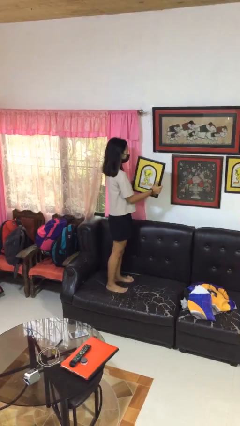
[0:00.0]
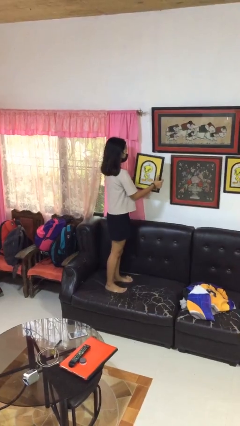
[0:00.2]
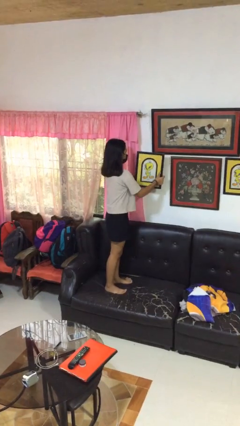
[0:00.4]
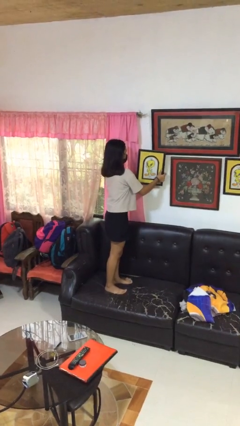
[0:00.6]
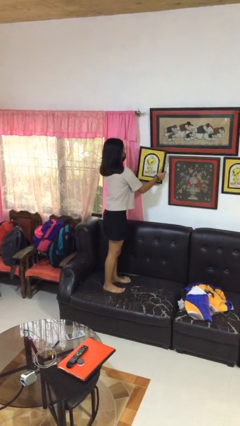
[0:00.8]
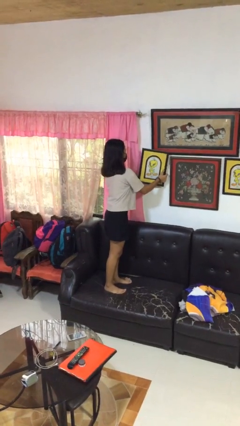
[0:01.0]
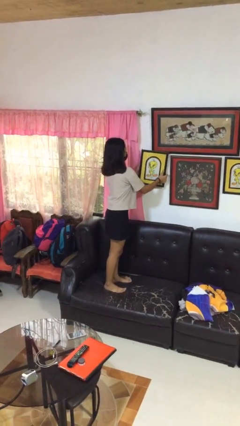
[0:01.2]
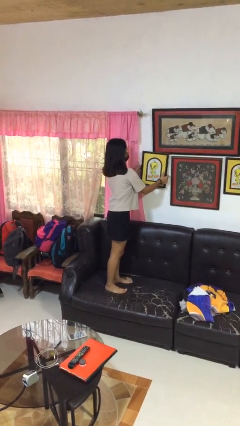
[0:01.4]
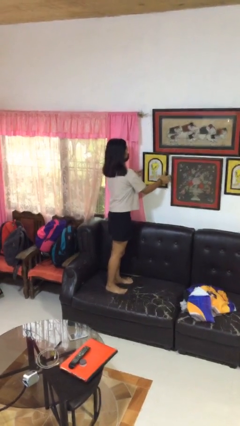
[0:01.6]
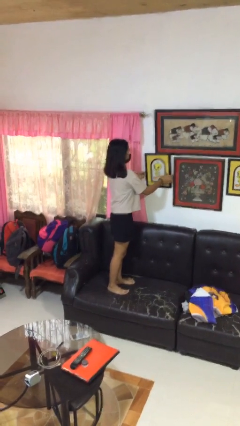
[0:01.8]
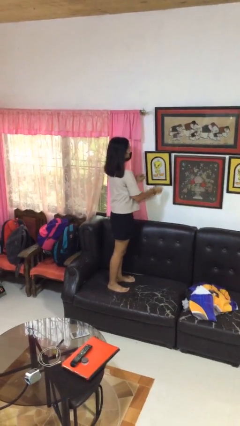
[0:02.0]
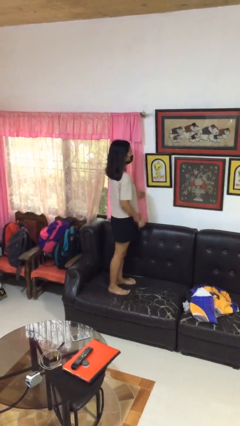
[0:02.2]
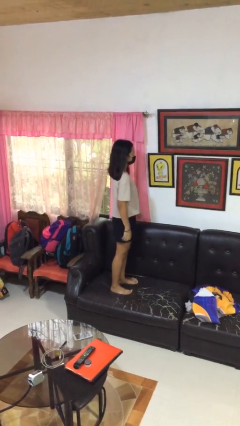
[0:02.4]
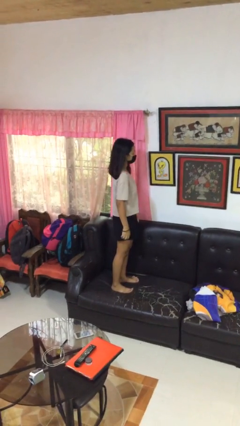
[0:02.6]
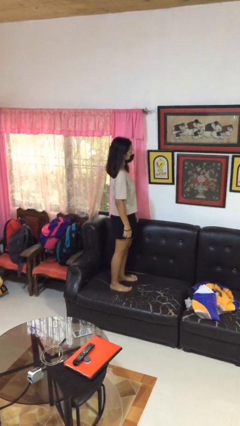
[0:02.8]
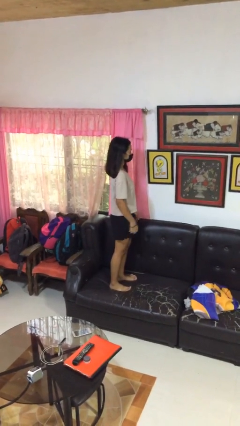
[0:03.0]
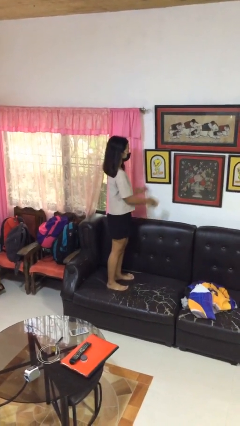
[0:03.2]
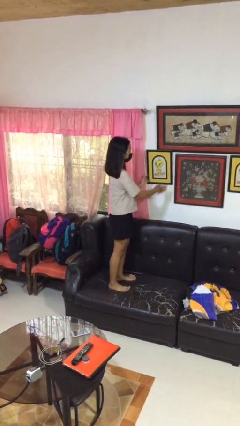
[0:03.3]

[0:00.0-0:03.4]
person puts up picture frame

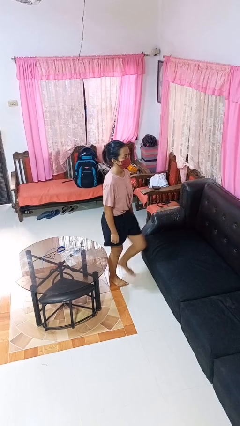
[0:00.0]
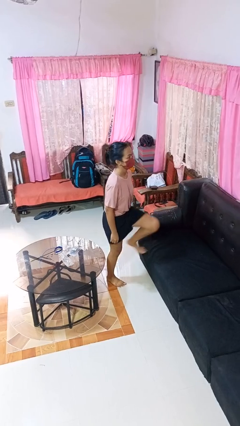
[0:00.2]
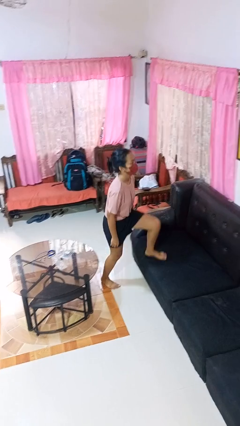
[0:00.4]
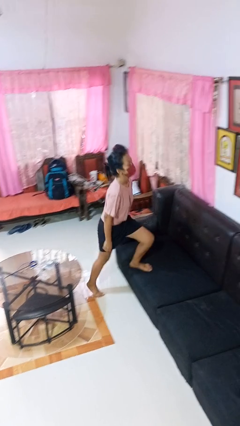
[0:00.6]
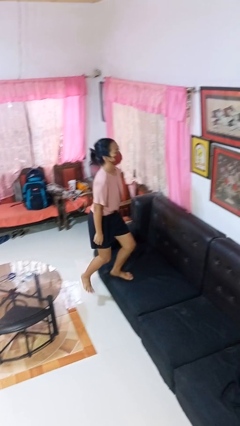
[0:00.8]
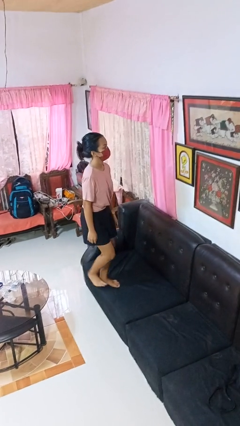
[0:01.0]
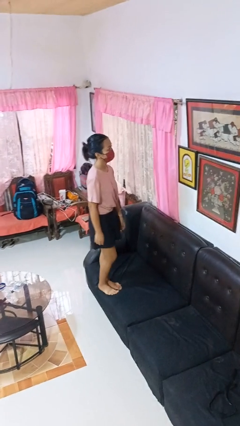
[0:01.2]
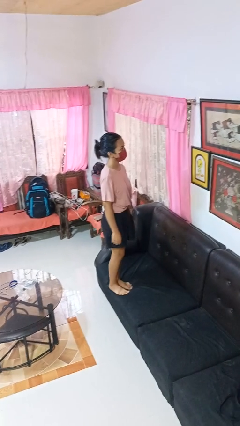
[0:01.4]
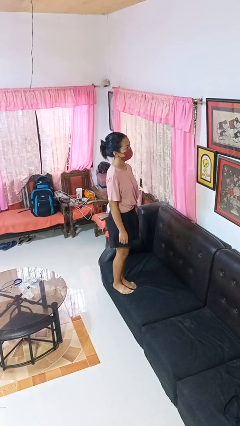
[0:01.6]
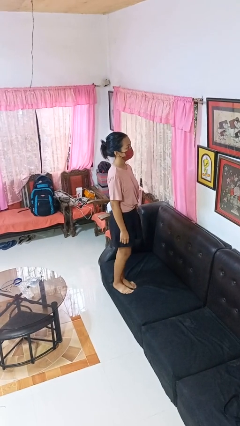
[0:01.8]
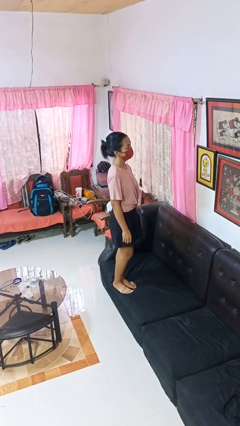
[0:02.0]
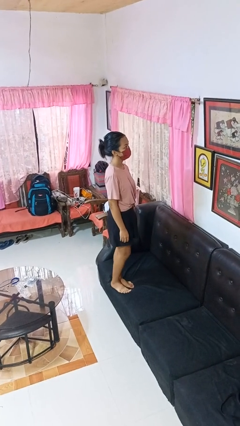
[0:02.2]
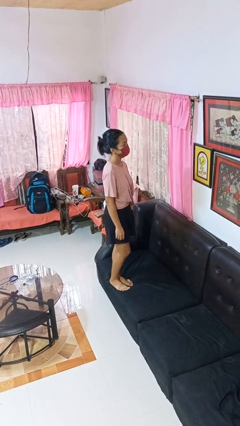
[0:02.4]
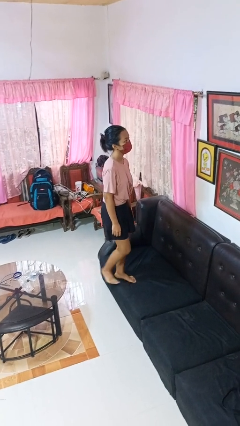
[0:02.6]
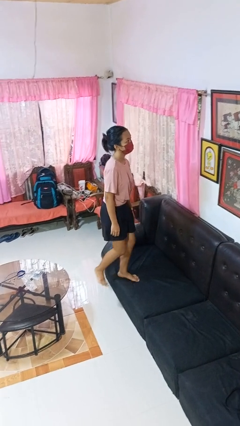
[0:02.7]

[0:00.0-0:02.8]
person climbs on couch

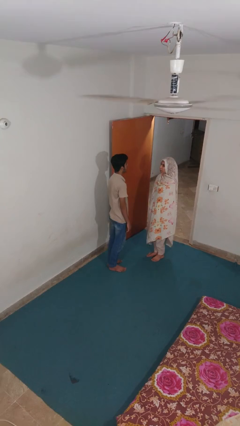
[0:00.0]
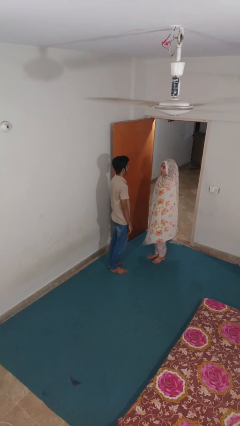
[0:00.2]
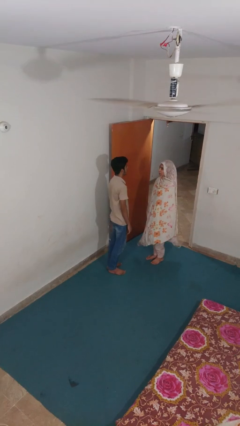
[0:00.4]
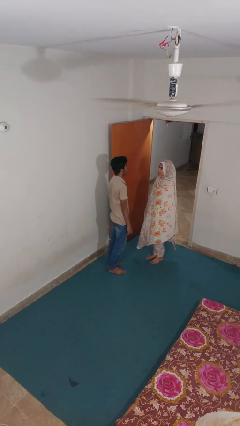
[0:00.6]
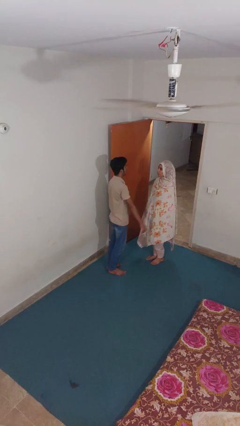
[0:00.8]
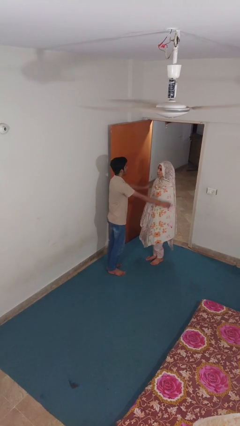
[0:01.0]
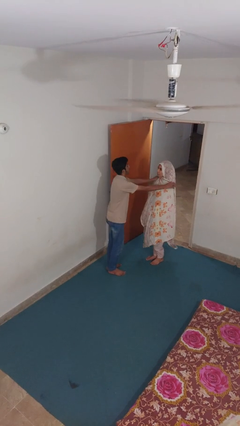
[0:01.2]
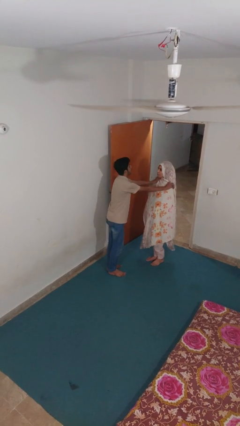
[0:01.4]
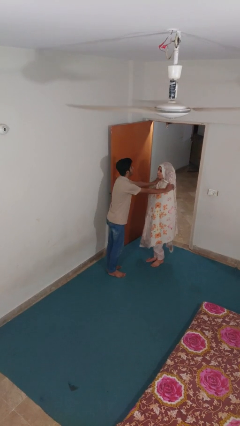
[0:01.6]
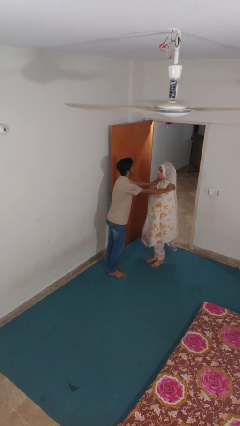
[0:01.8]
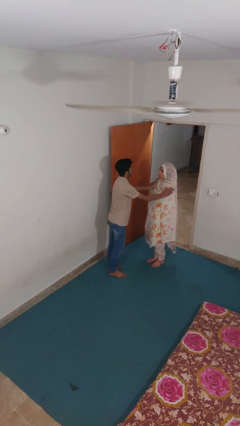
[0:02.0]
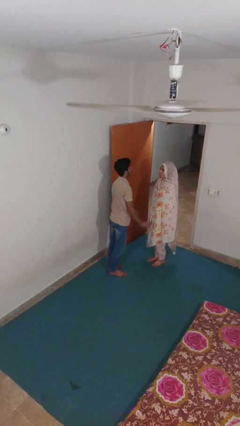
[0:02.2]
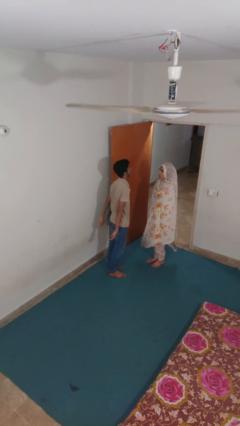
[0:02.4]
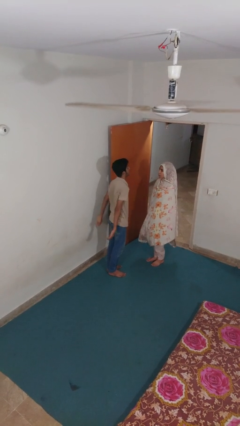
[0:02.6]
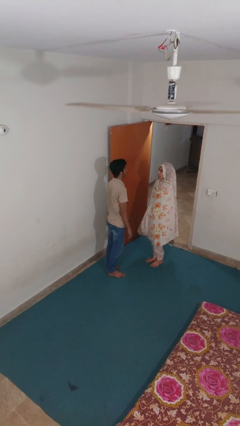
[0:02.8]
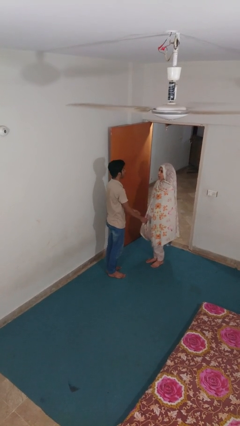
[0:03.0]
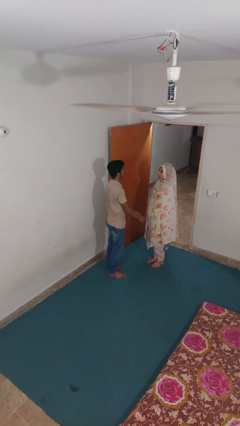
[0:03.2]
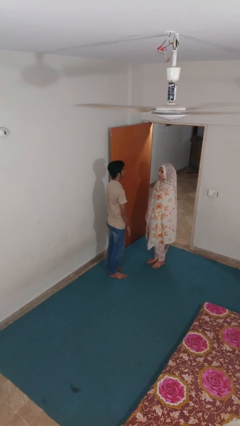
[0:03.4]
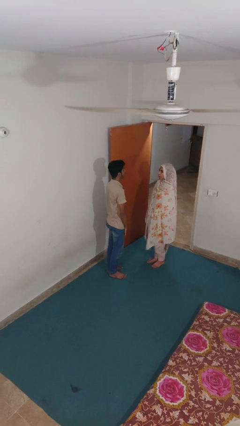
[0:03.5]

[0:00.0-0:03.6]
person pounds shoulders of person

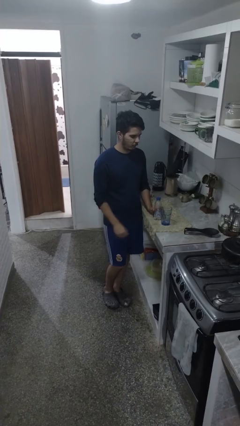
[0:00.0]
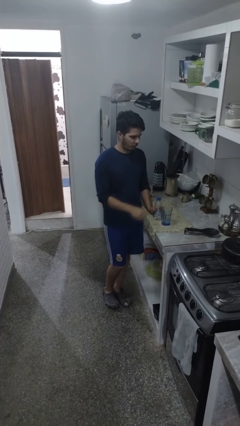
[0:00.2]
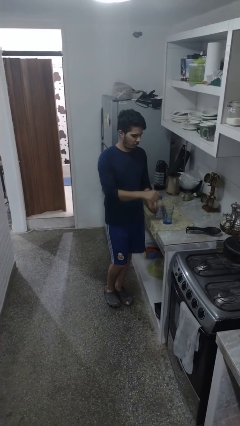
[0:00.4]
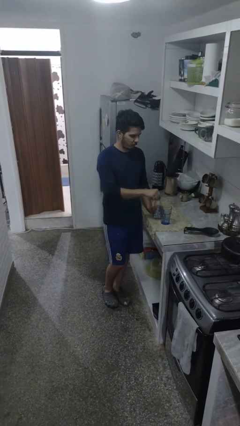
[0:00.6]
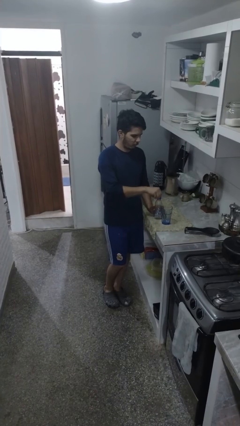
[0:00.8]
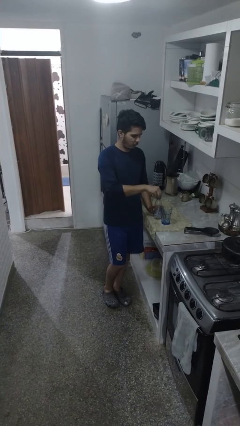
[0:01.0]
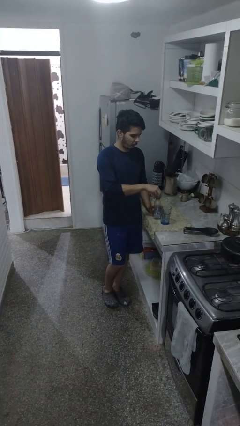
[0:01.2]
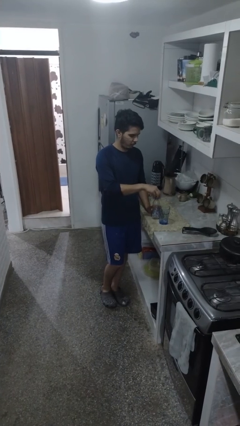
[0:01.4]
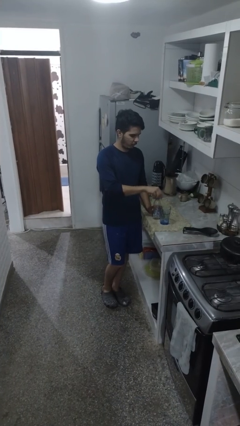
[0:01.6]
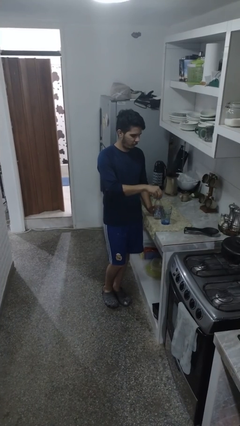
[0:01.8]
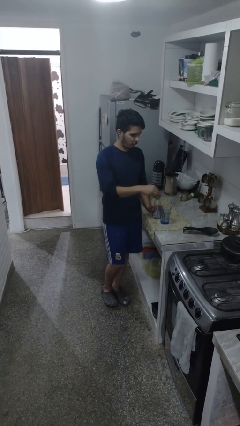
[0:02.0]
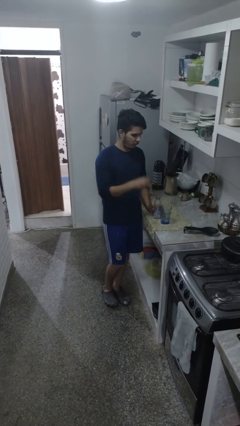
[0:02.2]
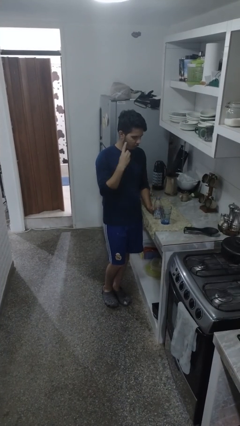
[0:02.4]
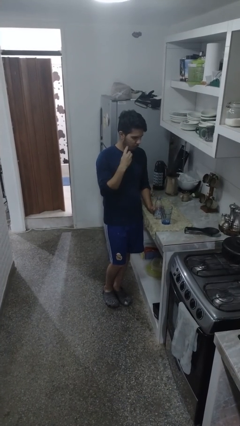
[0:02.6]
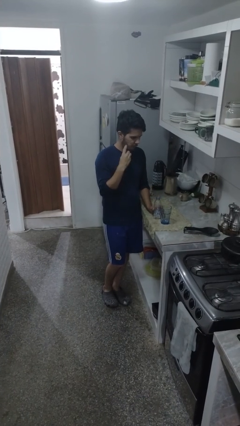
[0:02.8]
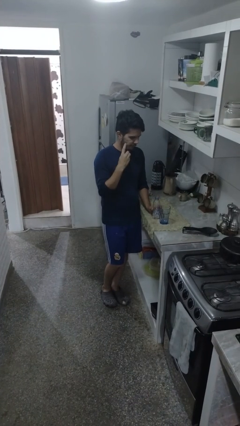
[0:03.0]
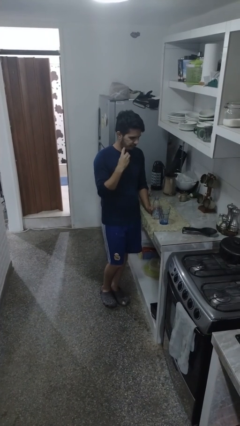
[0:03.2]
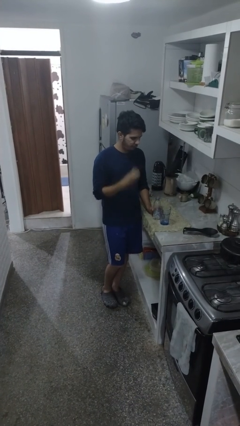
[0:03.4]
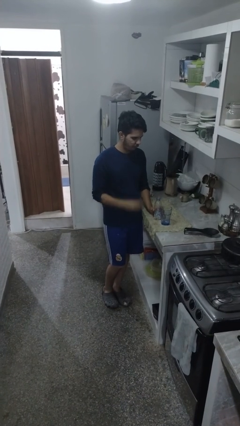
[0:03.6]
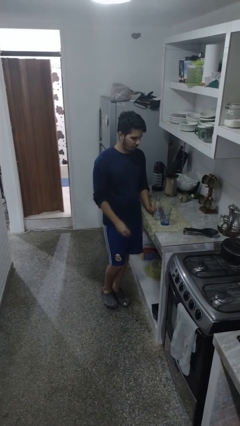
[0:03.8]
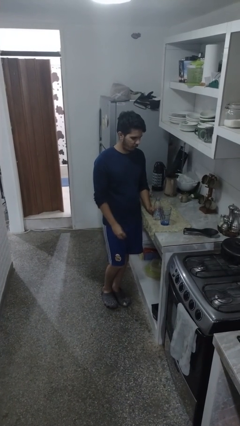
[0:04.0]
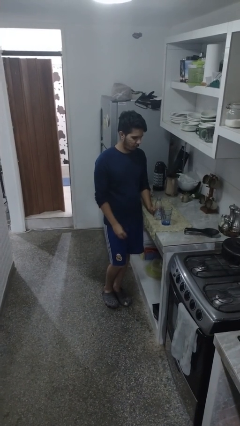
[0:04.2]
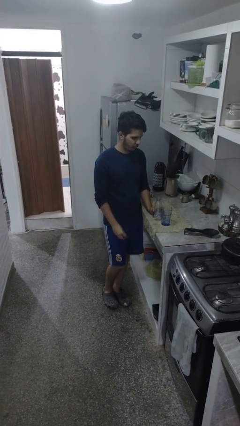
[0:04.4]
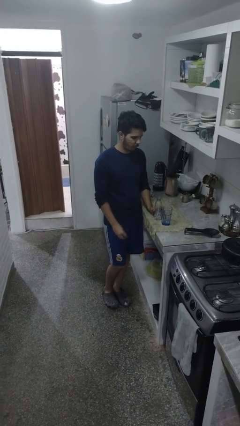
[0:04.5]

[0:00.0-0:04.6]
person unscrews lid from bottle

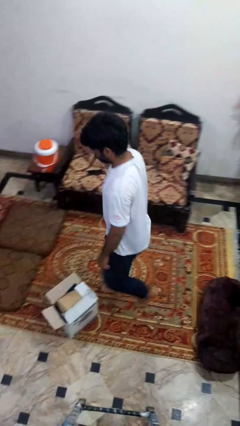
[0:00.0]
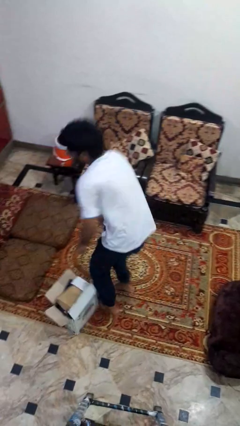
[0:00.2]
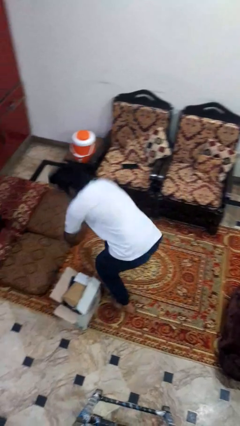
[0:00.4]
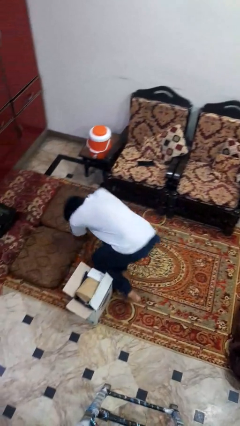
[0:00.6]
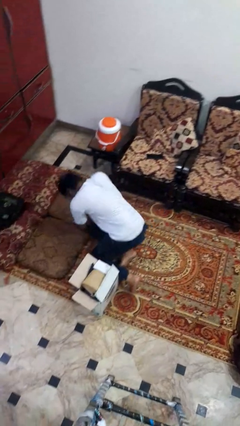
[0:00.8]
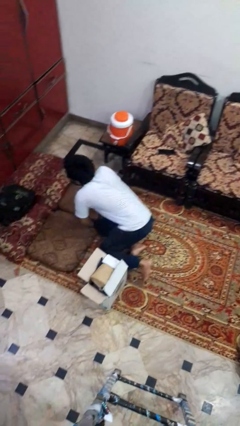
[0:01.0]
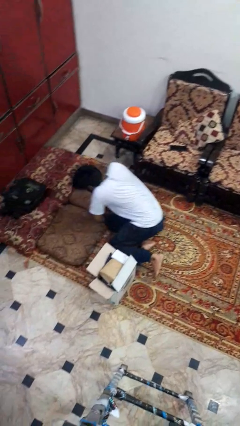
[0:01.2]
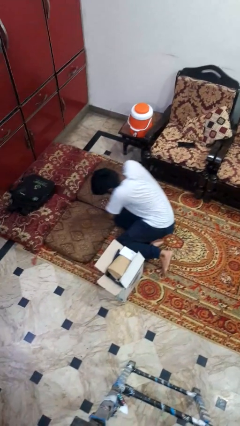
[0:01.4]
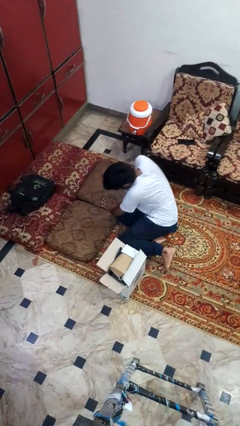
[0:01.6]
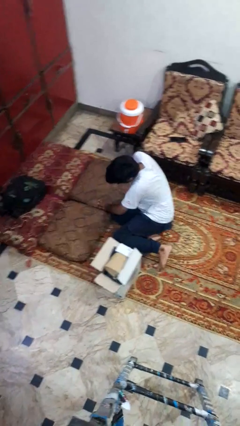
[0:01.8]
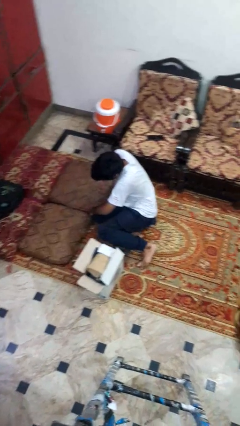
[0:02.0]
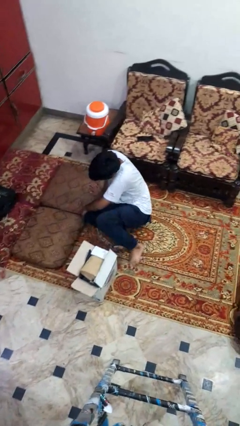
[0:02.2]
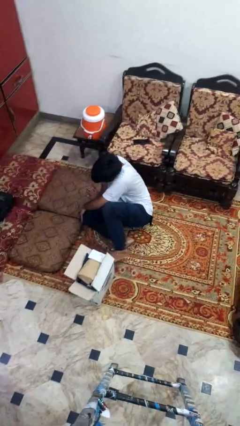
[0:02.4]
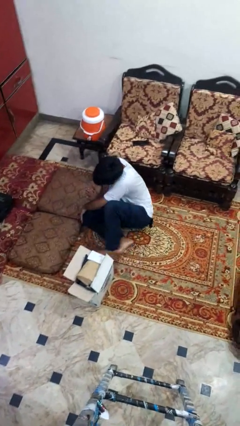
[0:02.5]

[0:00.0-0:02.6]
person trips on object on floor

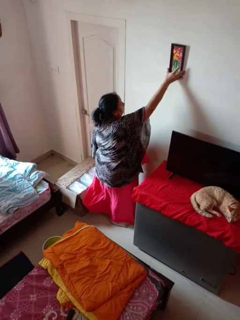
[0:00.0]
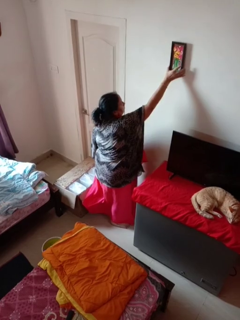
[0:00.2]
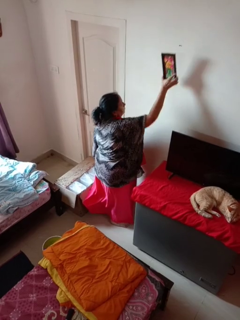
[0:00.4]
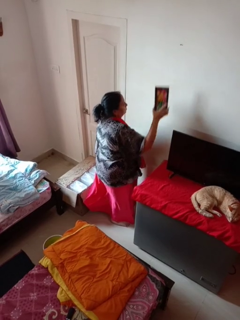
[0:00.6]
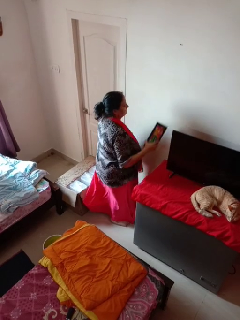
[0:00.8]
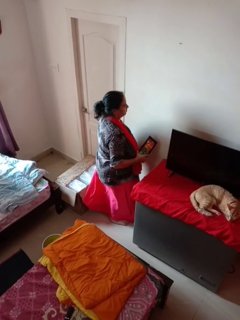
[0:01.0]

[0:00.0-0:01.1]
person takes down picture frame
